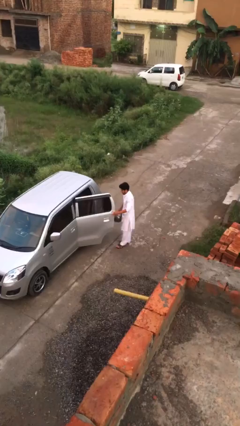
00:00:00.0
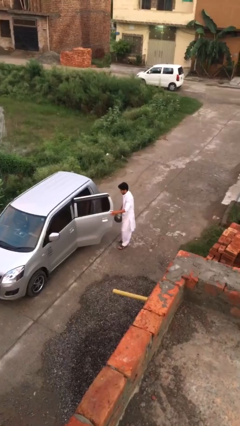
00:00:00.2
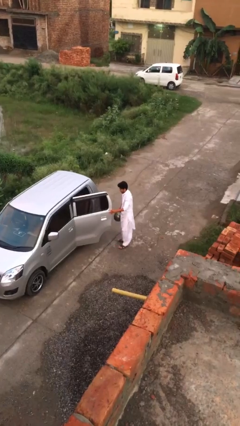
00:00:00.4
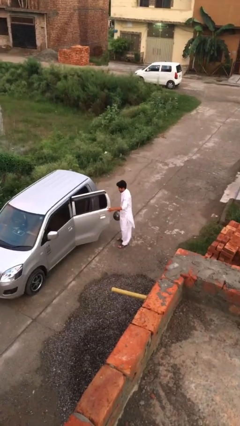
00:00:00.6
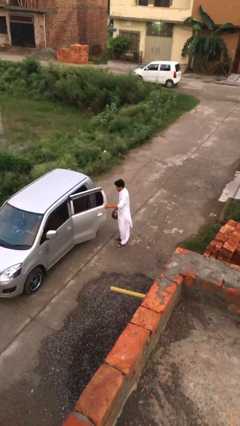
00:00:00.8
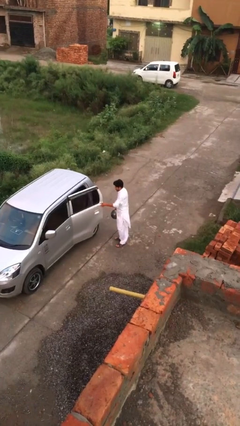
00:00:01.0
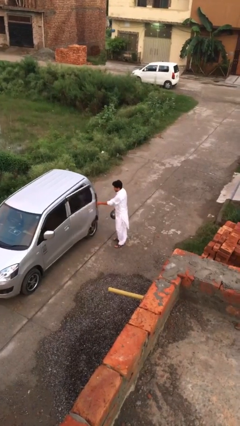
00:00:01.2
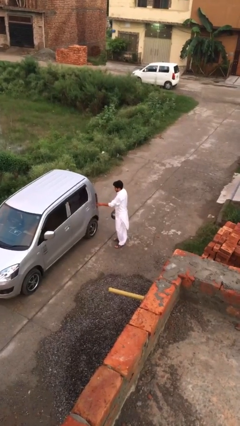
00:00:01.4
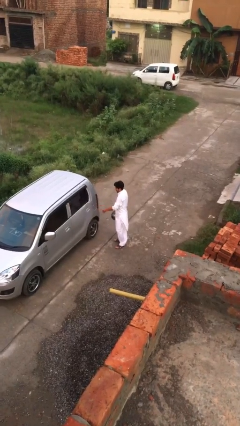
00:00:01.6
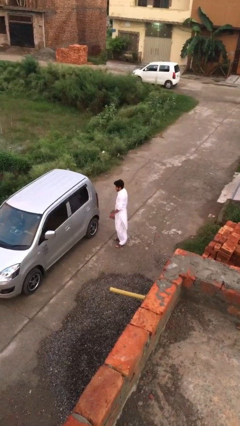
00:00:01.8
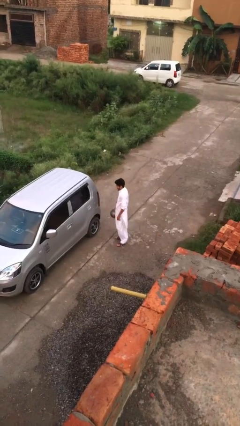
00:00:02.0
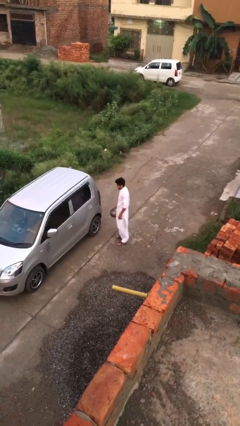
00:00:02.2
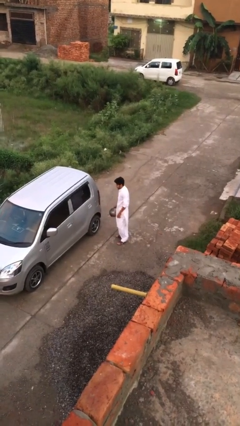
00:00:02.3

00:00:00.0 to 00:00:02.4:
person closes car door

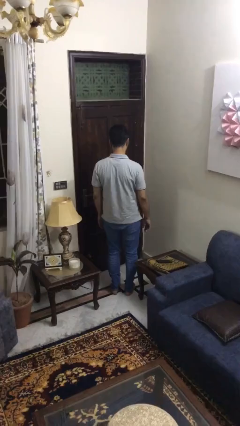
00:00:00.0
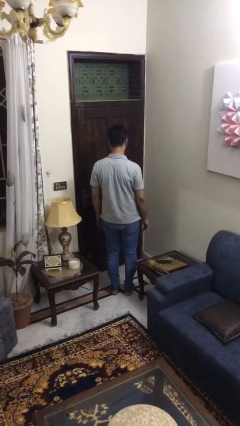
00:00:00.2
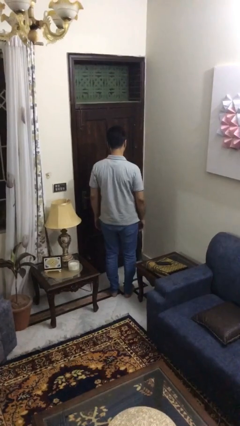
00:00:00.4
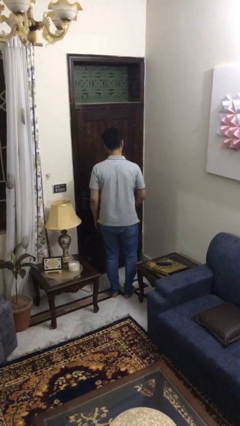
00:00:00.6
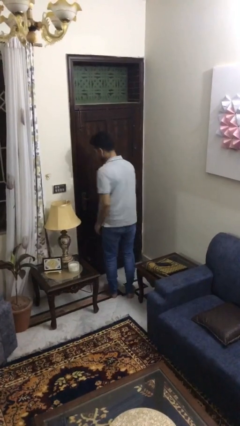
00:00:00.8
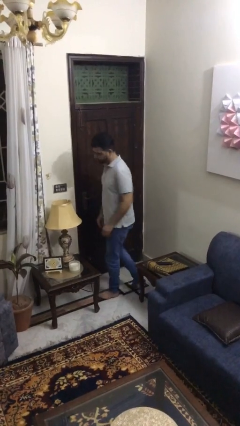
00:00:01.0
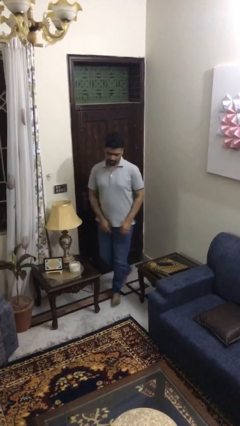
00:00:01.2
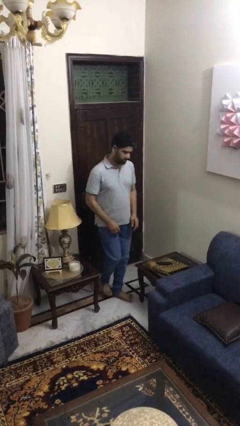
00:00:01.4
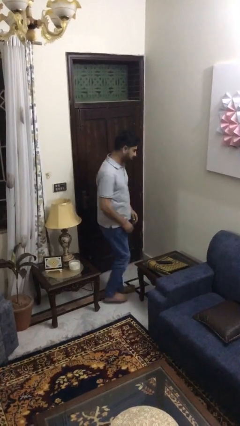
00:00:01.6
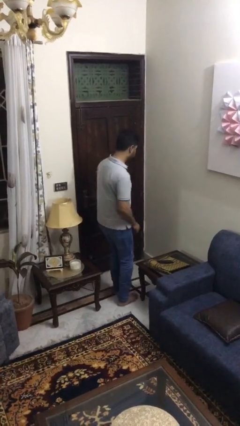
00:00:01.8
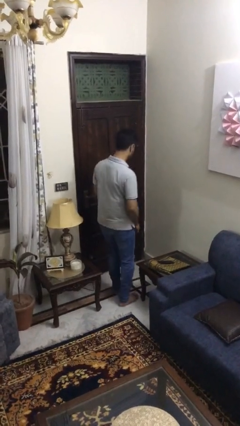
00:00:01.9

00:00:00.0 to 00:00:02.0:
person twirls

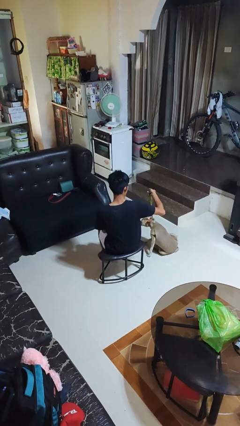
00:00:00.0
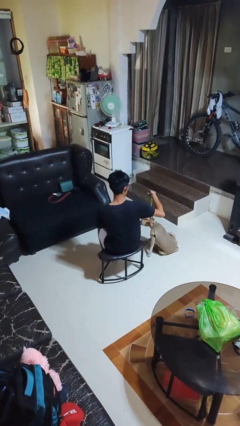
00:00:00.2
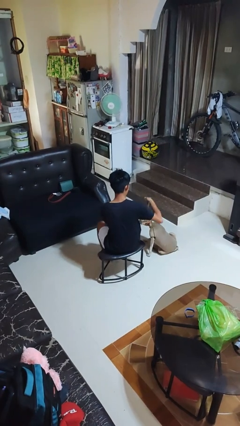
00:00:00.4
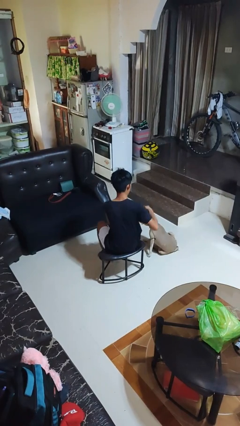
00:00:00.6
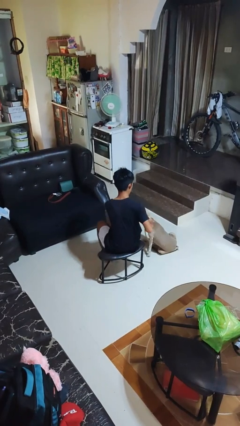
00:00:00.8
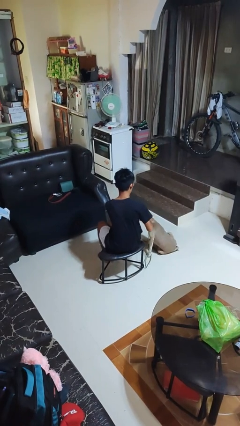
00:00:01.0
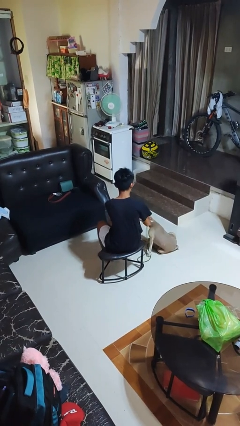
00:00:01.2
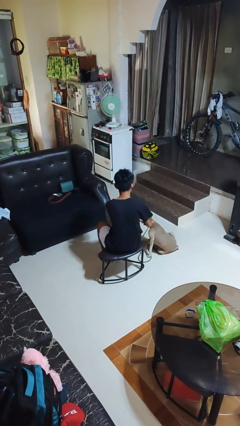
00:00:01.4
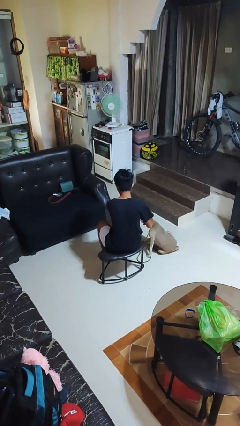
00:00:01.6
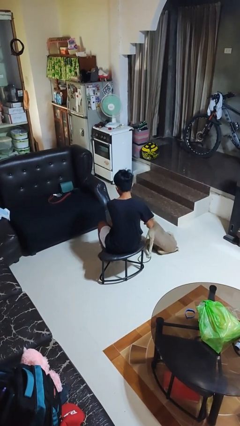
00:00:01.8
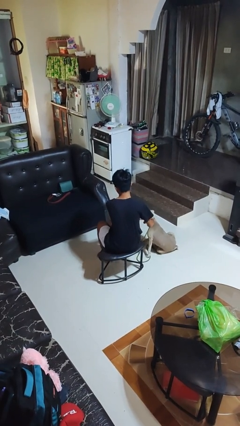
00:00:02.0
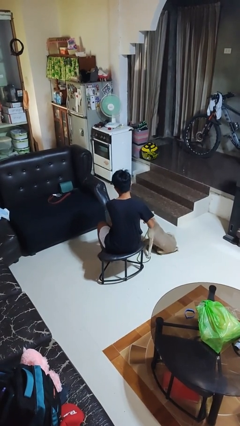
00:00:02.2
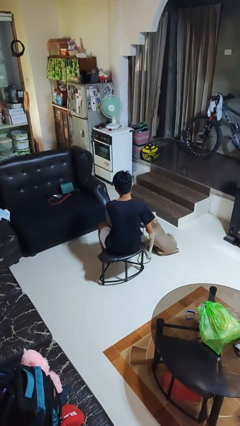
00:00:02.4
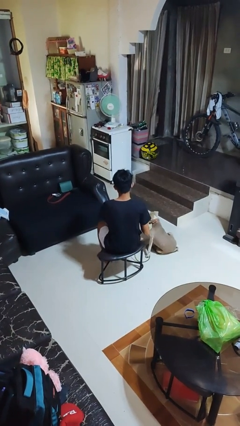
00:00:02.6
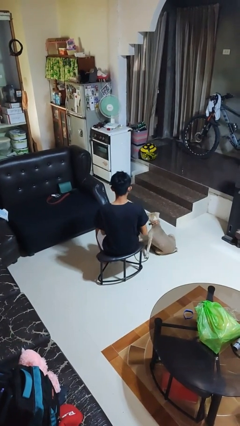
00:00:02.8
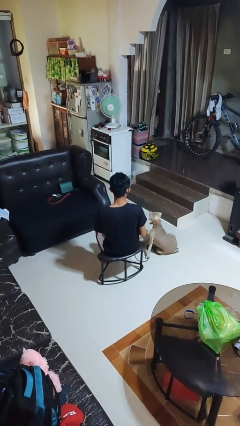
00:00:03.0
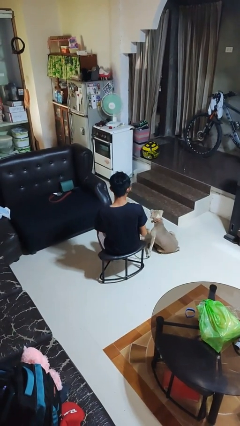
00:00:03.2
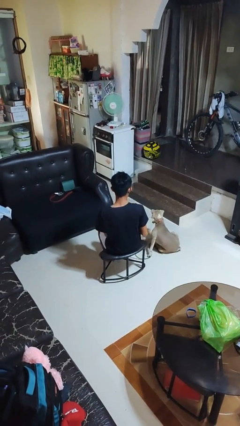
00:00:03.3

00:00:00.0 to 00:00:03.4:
person unattaches leash from dog

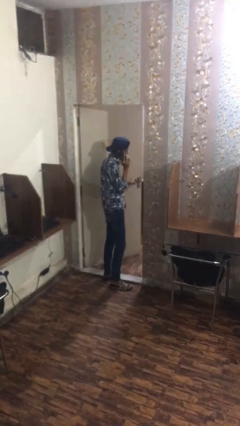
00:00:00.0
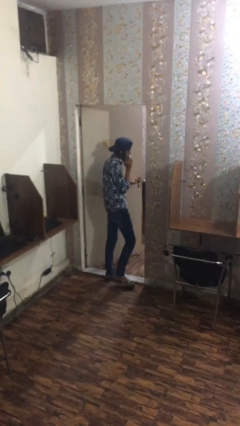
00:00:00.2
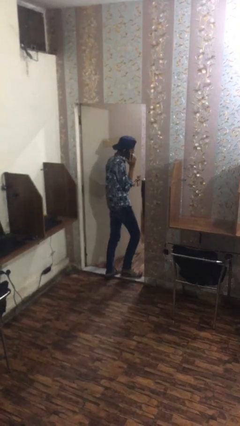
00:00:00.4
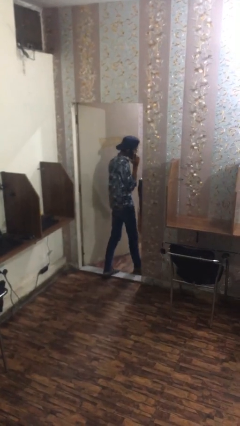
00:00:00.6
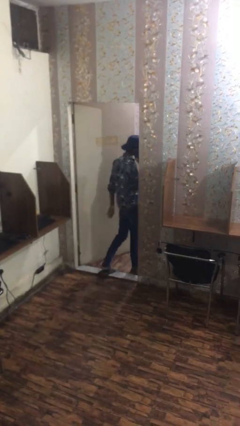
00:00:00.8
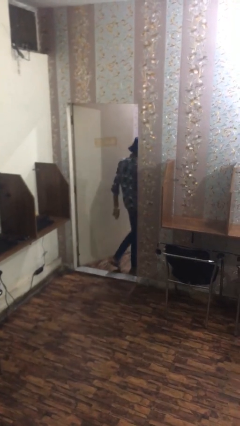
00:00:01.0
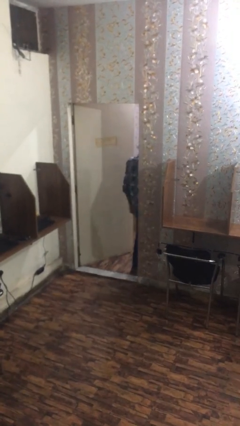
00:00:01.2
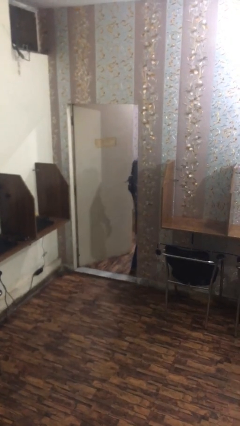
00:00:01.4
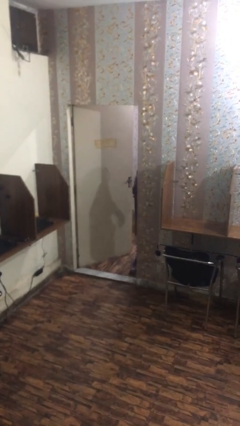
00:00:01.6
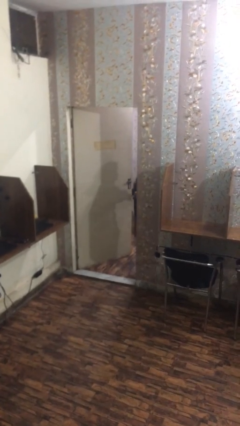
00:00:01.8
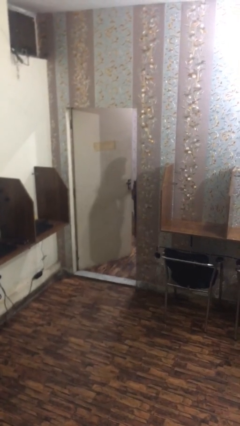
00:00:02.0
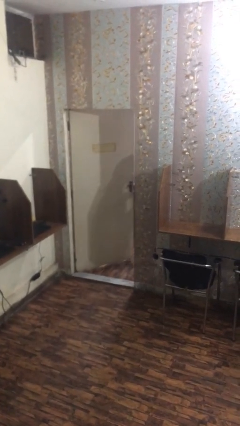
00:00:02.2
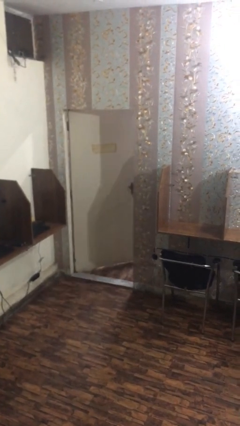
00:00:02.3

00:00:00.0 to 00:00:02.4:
person exits scene through structure

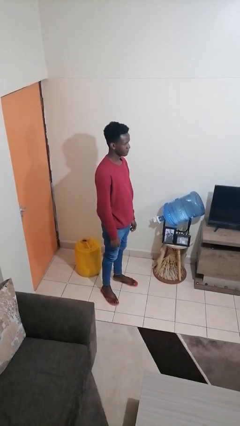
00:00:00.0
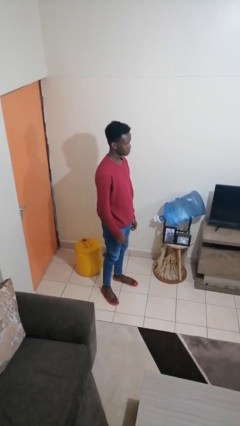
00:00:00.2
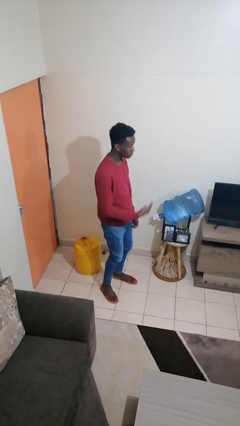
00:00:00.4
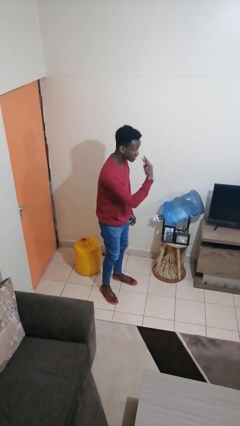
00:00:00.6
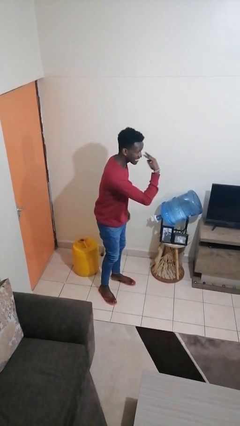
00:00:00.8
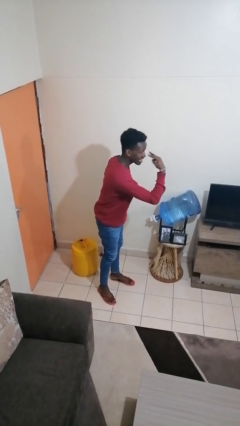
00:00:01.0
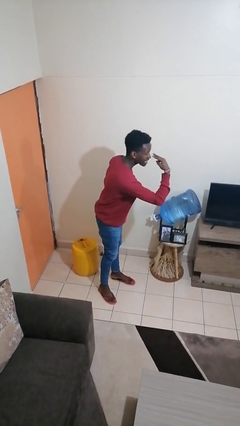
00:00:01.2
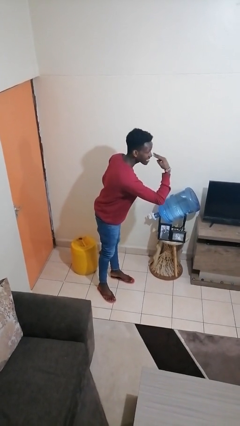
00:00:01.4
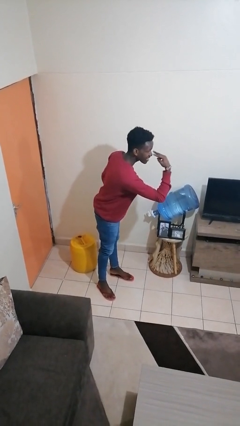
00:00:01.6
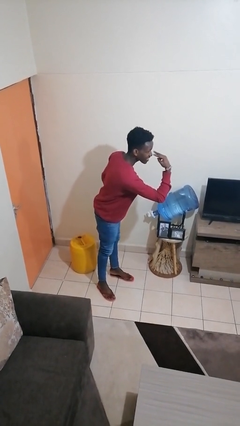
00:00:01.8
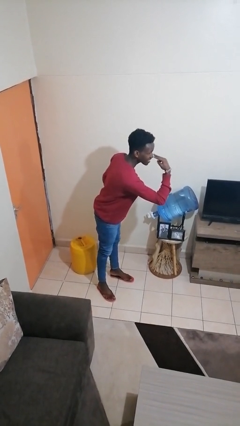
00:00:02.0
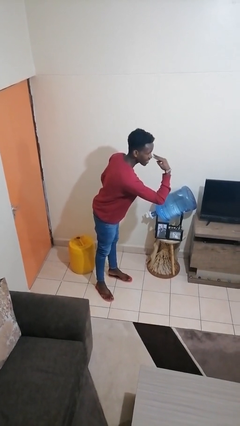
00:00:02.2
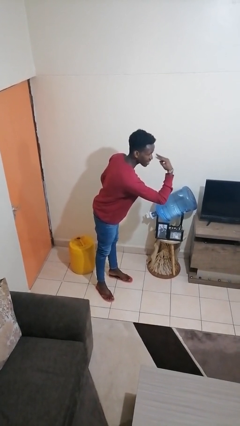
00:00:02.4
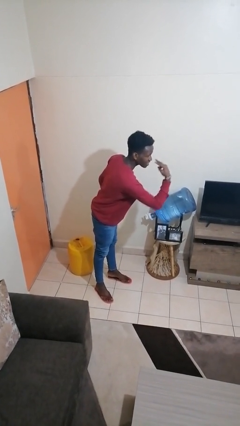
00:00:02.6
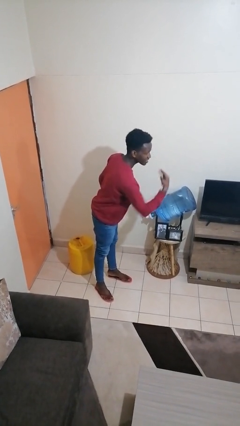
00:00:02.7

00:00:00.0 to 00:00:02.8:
person gestures watch closely

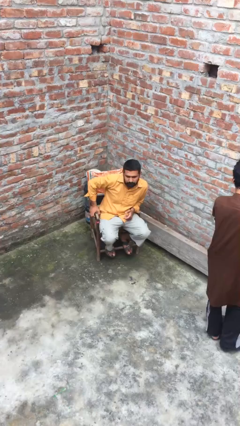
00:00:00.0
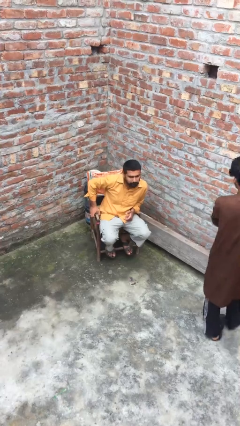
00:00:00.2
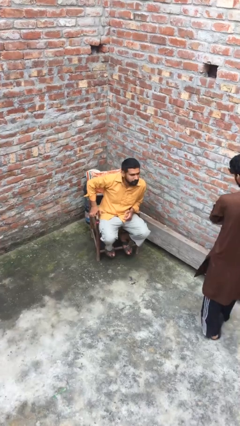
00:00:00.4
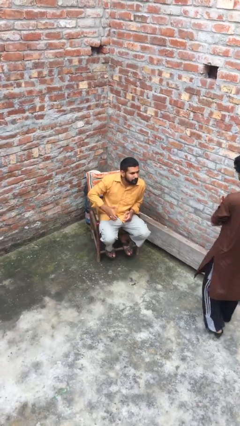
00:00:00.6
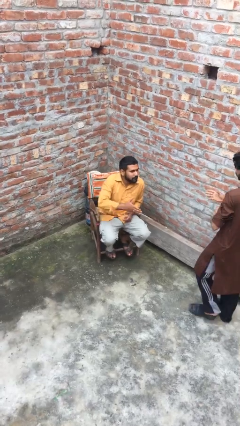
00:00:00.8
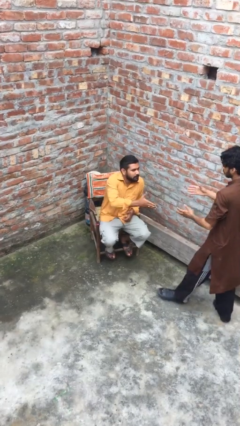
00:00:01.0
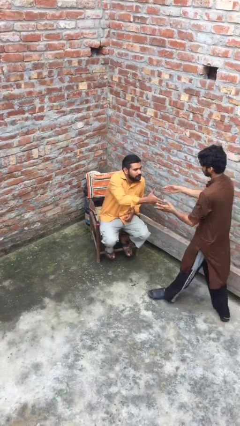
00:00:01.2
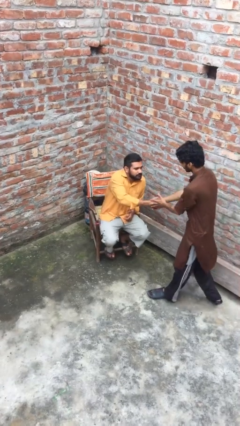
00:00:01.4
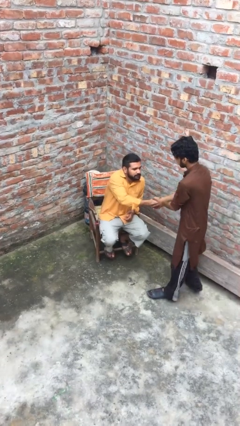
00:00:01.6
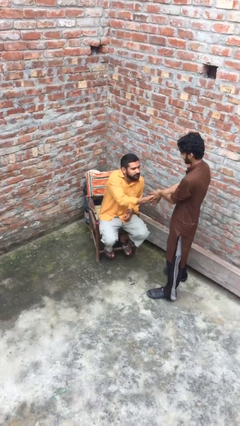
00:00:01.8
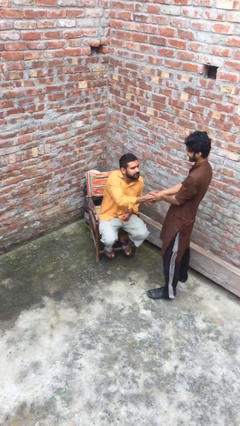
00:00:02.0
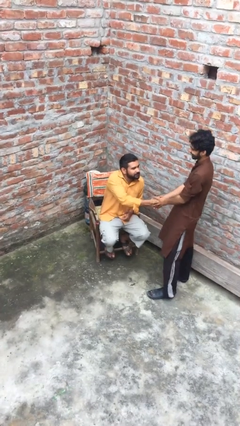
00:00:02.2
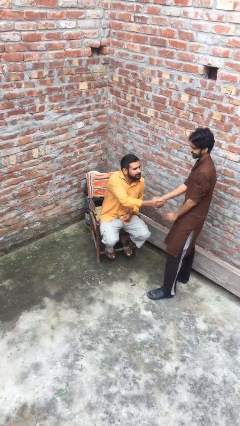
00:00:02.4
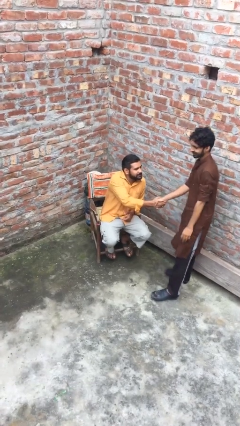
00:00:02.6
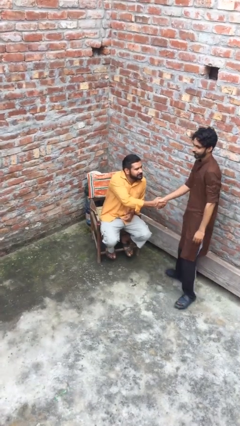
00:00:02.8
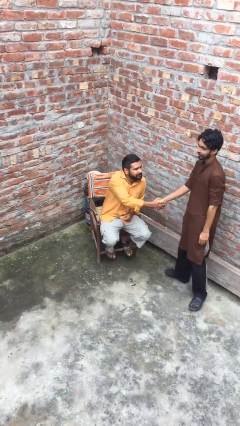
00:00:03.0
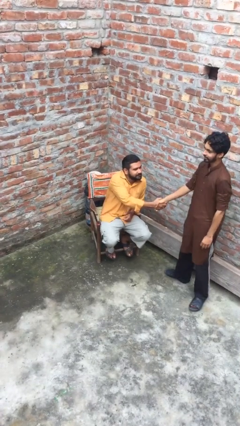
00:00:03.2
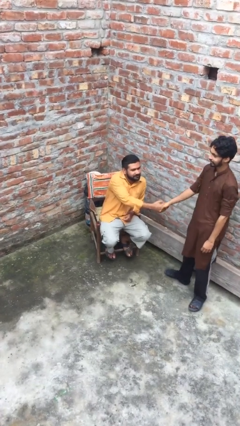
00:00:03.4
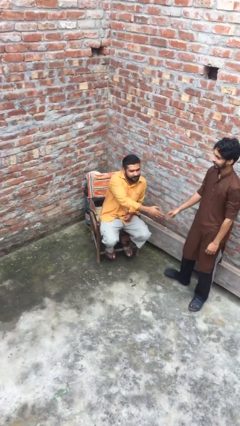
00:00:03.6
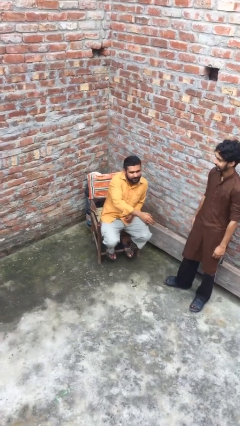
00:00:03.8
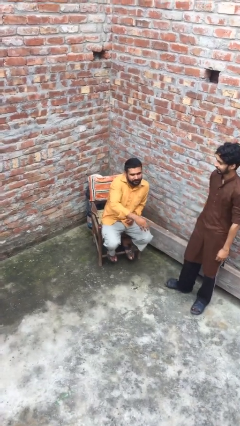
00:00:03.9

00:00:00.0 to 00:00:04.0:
person shakes hand

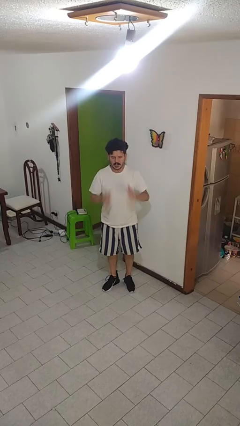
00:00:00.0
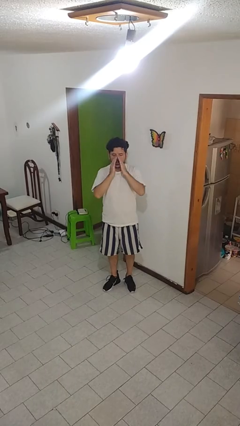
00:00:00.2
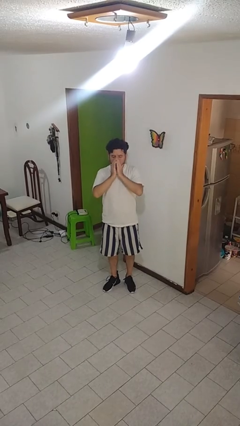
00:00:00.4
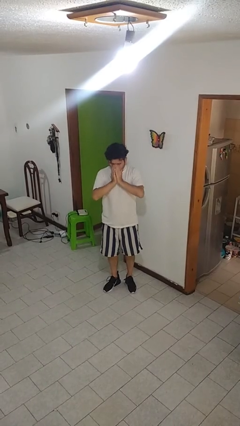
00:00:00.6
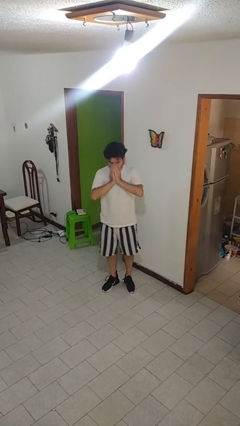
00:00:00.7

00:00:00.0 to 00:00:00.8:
person sneezes into hand
